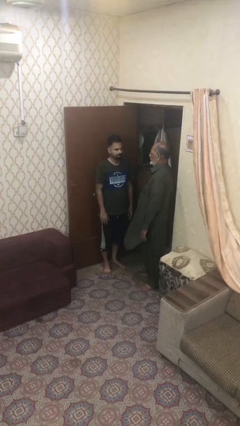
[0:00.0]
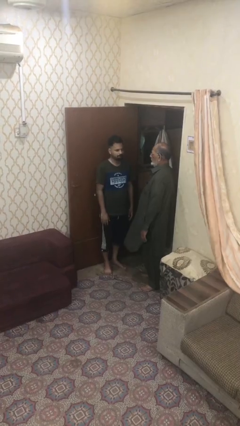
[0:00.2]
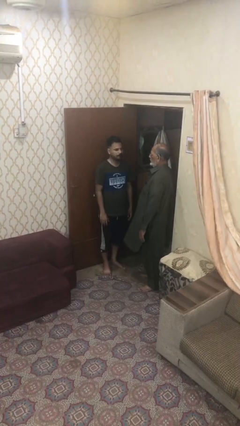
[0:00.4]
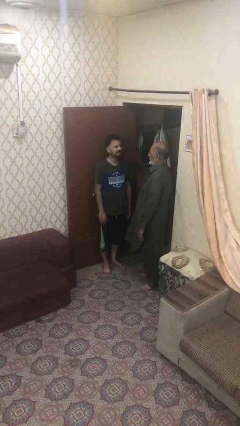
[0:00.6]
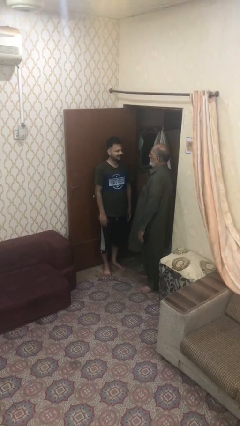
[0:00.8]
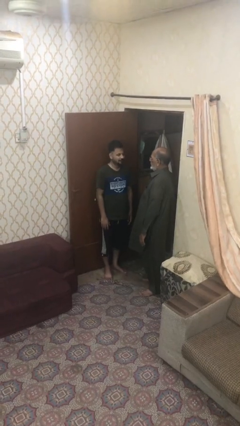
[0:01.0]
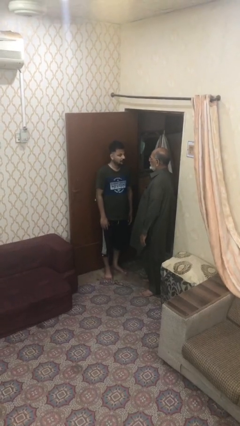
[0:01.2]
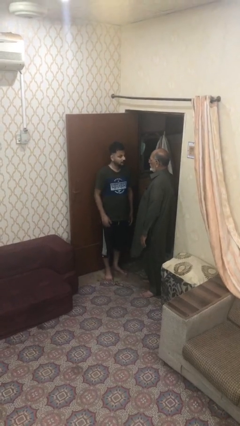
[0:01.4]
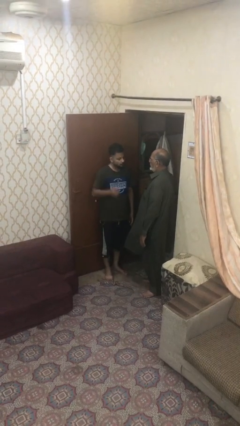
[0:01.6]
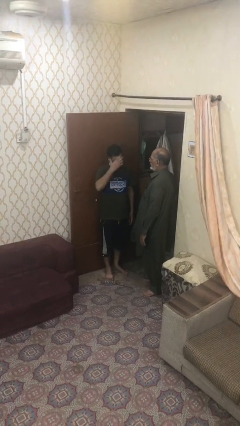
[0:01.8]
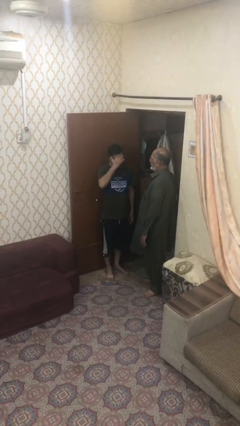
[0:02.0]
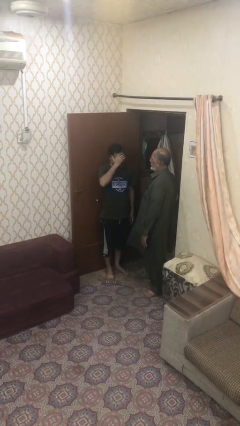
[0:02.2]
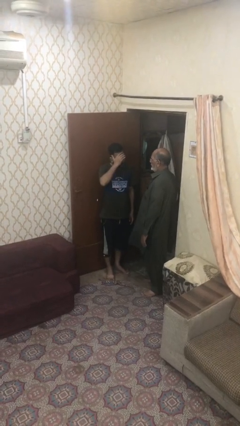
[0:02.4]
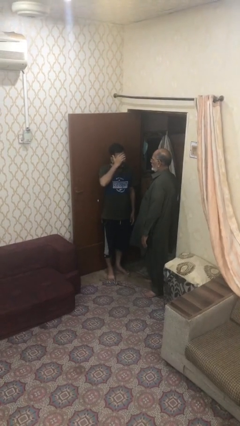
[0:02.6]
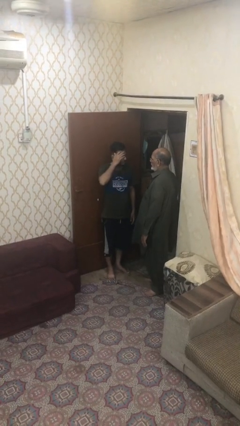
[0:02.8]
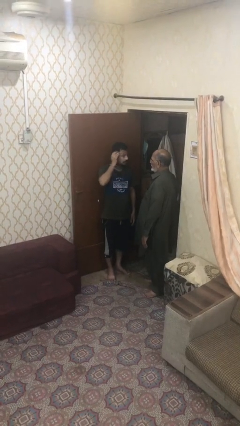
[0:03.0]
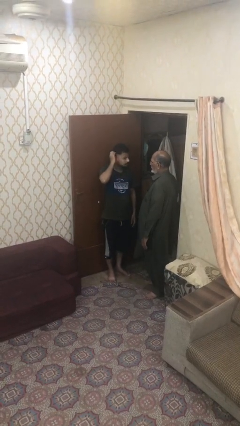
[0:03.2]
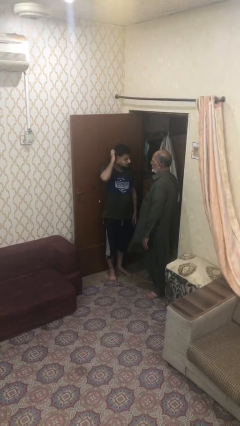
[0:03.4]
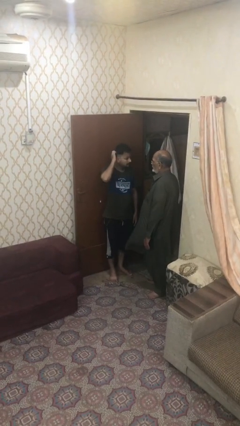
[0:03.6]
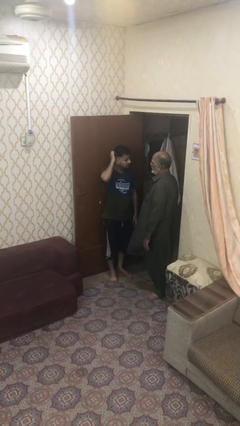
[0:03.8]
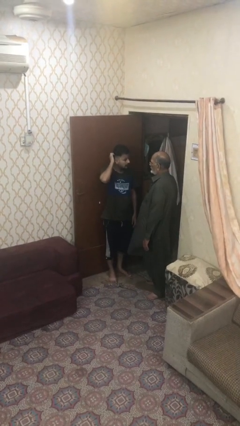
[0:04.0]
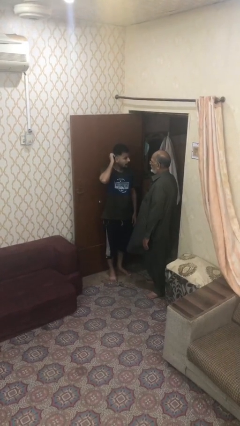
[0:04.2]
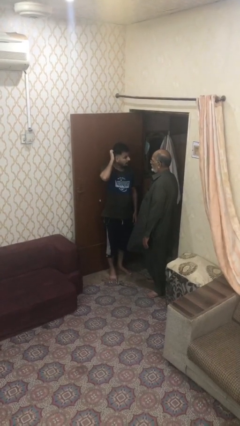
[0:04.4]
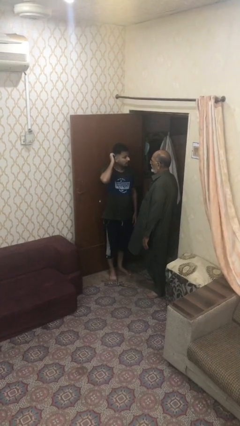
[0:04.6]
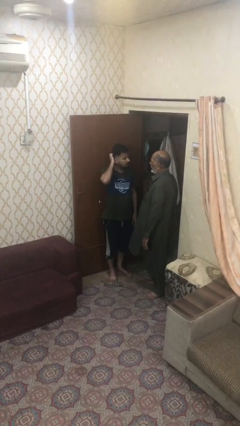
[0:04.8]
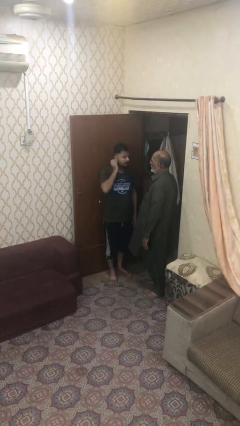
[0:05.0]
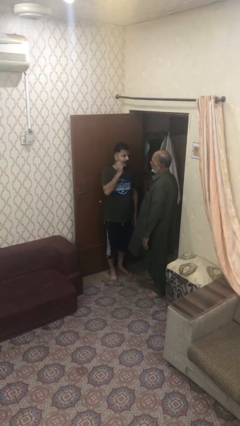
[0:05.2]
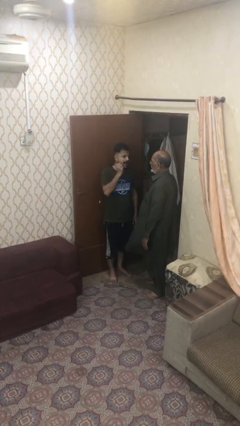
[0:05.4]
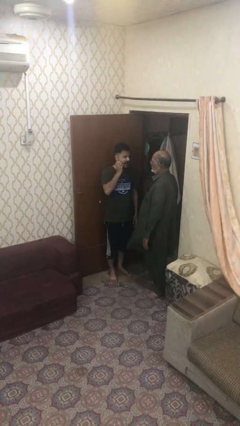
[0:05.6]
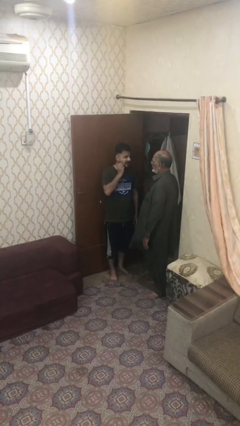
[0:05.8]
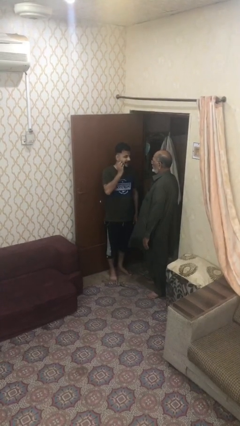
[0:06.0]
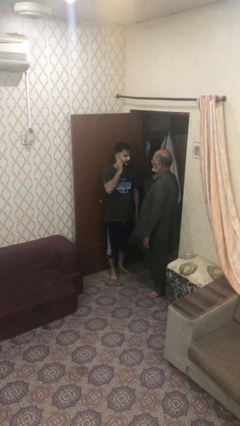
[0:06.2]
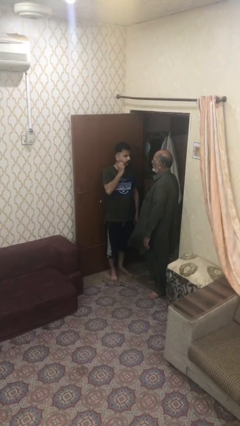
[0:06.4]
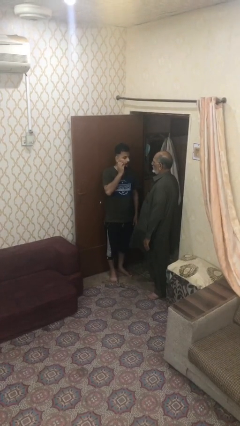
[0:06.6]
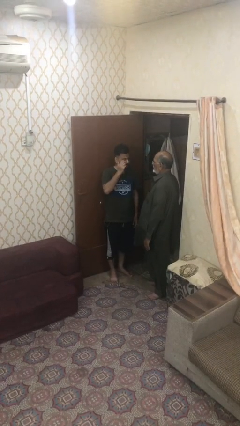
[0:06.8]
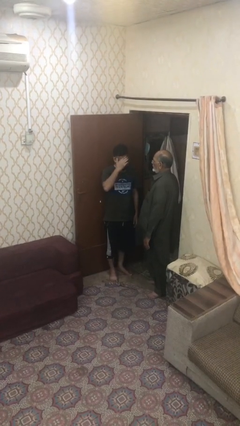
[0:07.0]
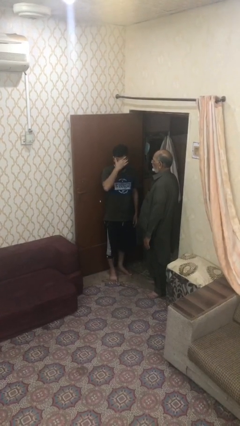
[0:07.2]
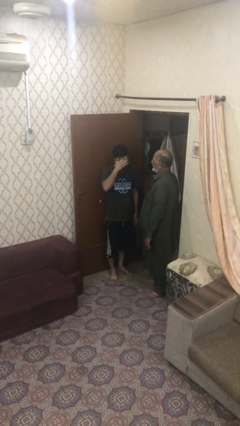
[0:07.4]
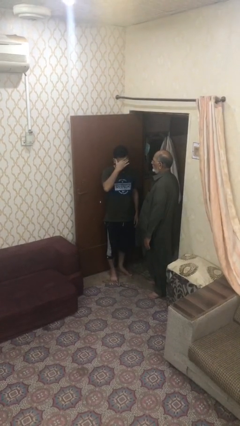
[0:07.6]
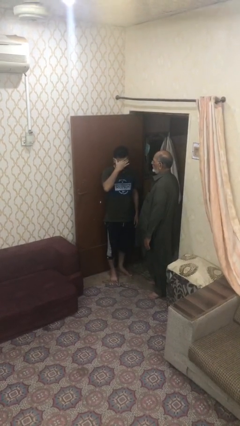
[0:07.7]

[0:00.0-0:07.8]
person talks to person

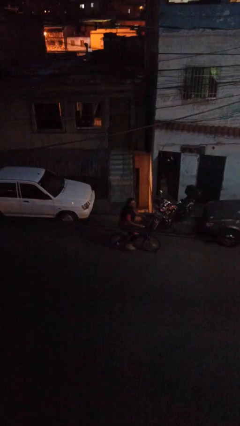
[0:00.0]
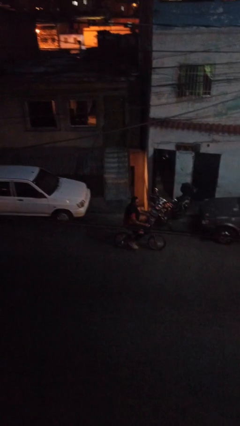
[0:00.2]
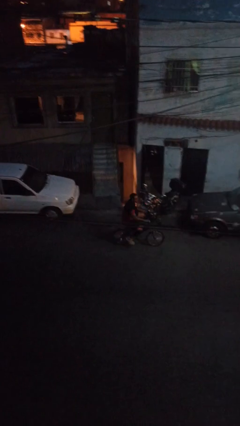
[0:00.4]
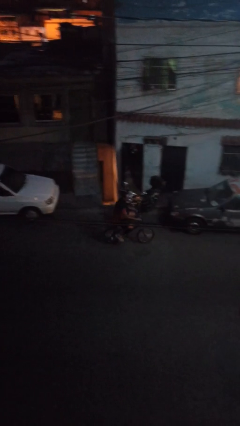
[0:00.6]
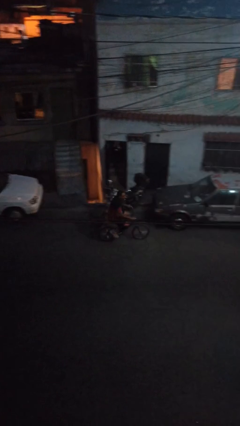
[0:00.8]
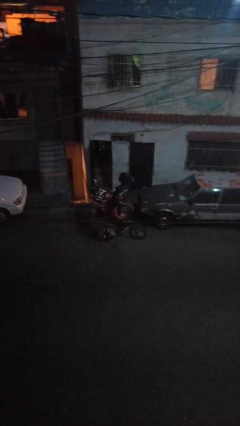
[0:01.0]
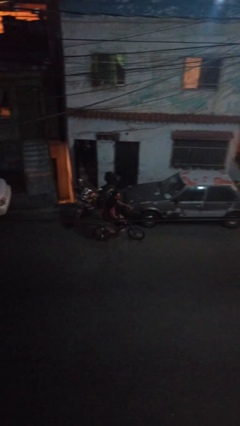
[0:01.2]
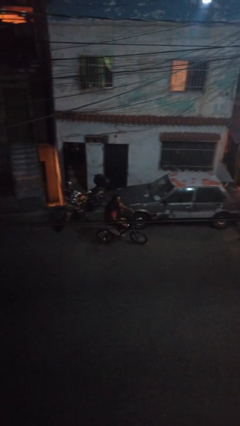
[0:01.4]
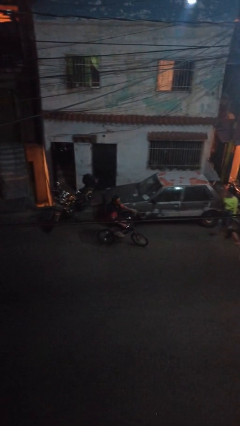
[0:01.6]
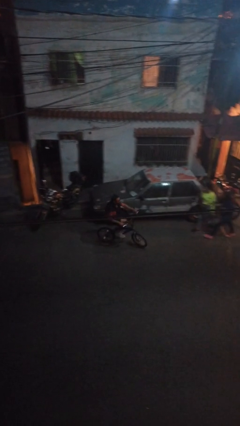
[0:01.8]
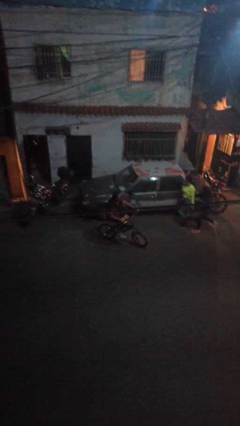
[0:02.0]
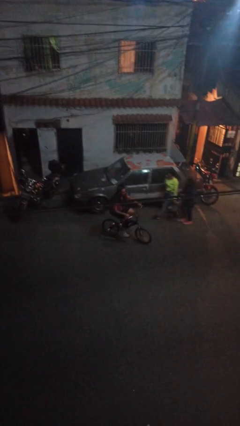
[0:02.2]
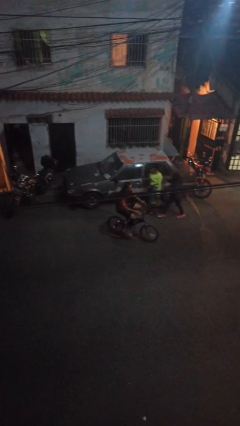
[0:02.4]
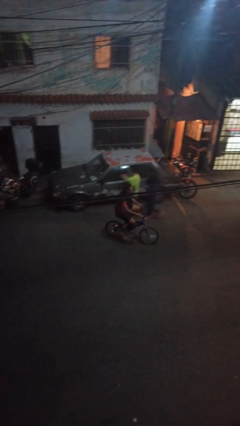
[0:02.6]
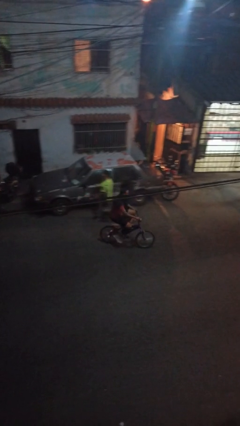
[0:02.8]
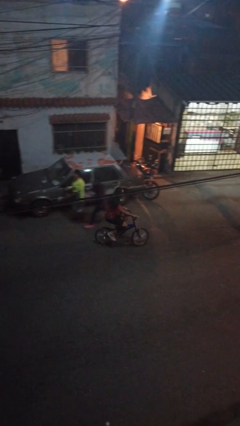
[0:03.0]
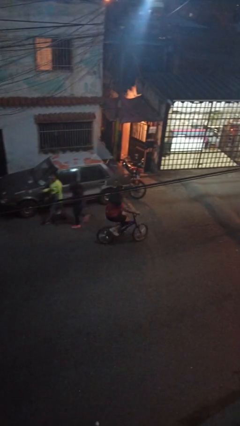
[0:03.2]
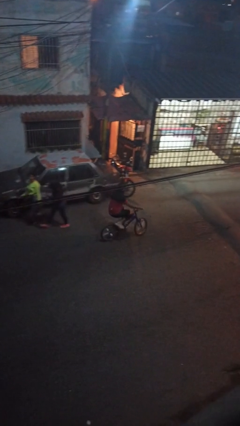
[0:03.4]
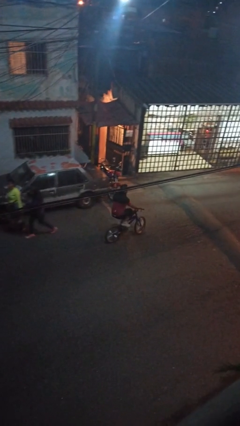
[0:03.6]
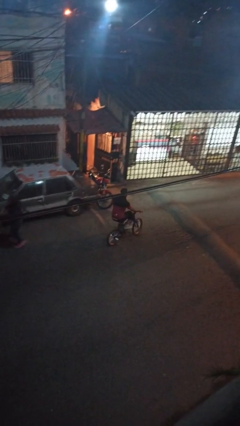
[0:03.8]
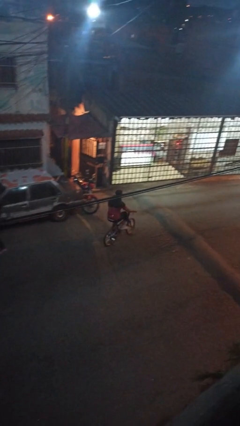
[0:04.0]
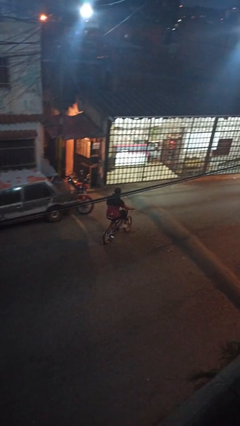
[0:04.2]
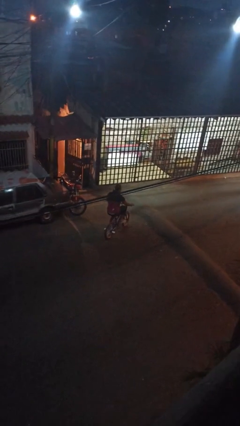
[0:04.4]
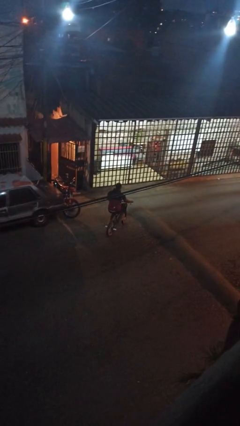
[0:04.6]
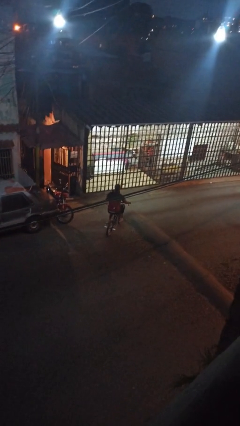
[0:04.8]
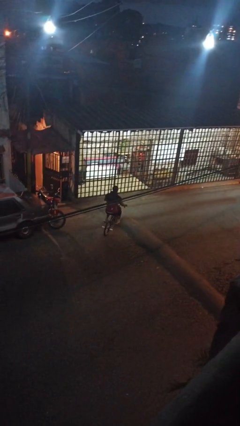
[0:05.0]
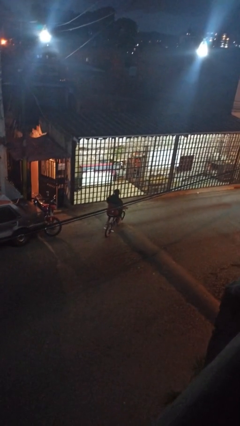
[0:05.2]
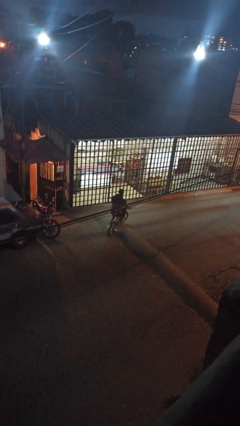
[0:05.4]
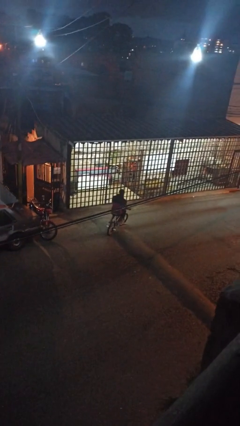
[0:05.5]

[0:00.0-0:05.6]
person rides bicycle

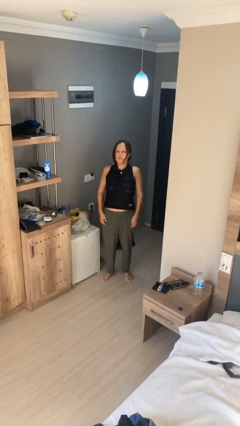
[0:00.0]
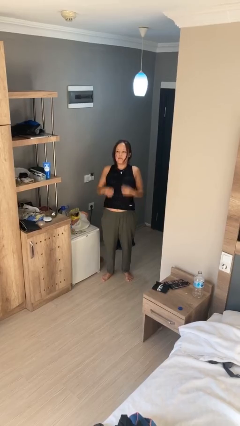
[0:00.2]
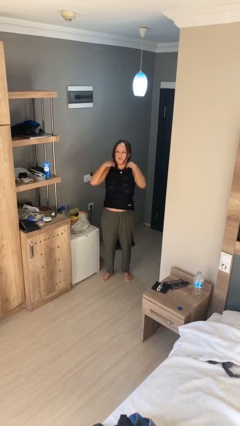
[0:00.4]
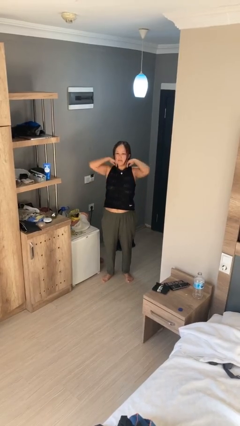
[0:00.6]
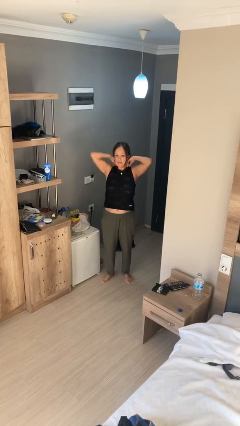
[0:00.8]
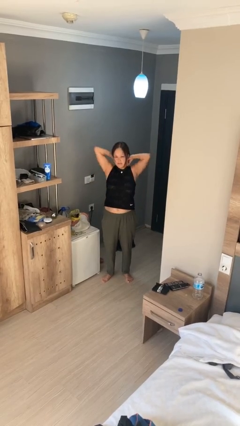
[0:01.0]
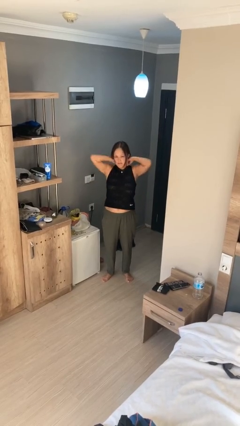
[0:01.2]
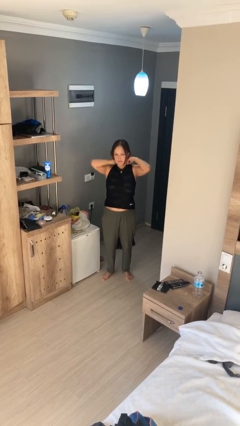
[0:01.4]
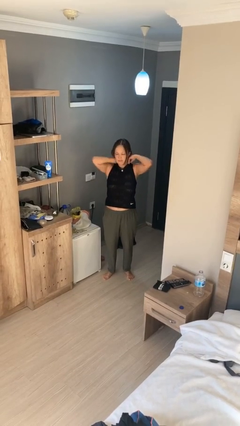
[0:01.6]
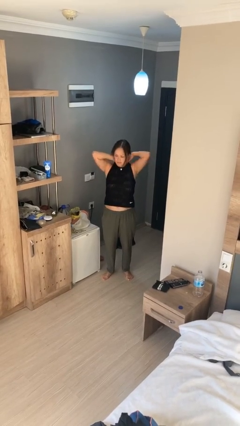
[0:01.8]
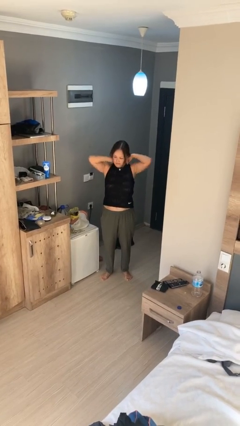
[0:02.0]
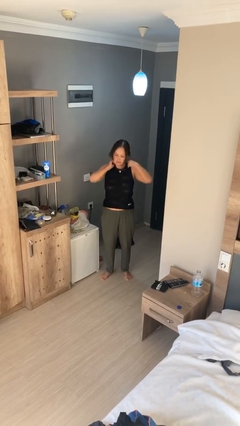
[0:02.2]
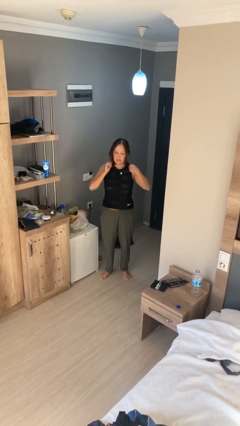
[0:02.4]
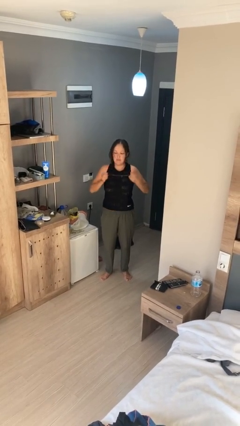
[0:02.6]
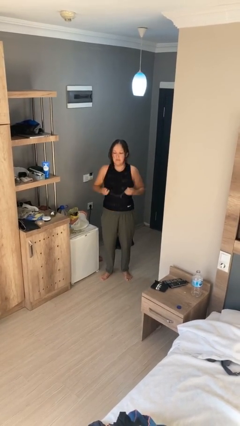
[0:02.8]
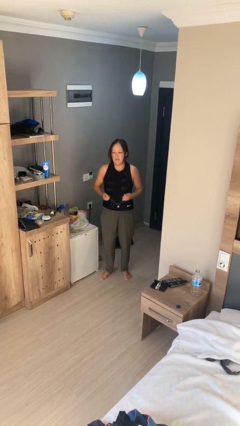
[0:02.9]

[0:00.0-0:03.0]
person takes off necklace

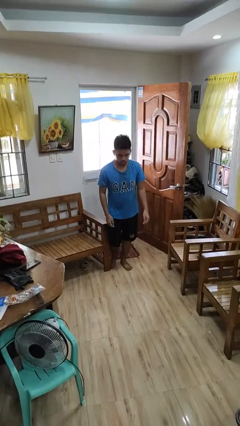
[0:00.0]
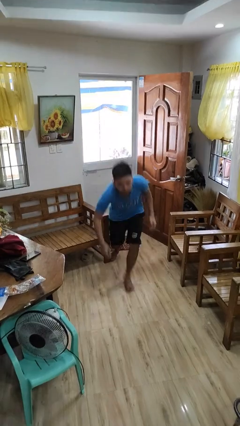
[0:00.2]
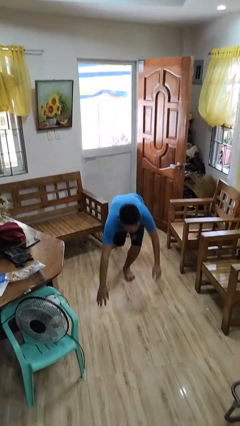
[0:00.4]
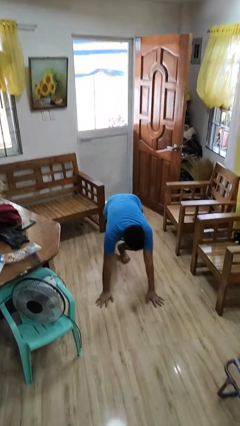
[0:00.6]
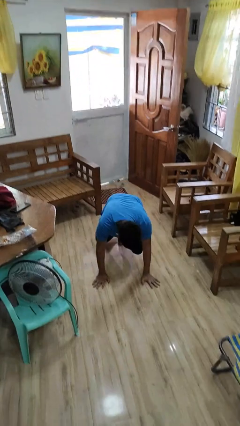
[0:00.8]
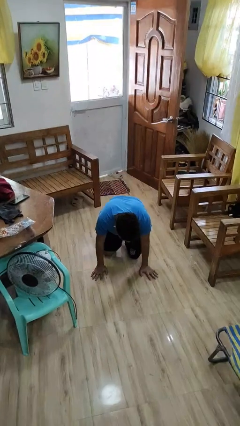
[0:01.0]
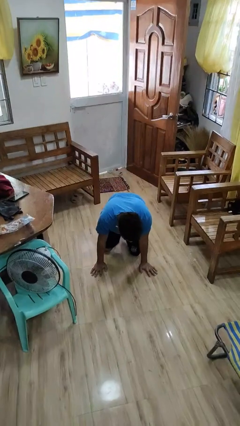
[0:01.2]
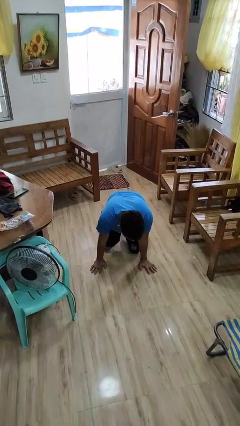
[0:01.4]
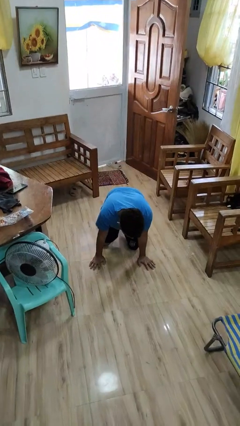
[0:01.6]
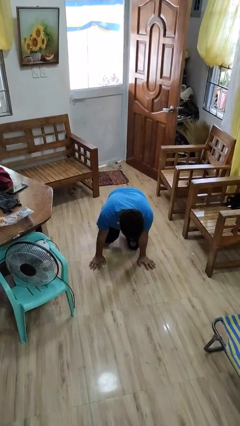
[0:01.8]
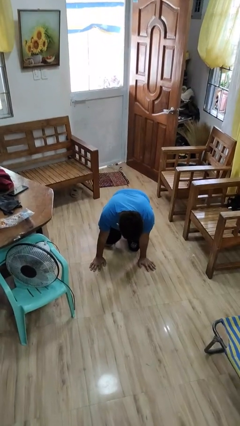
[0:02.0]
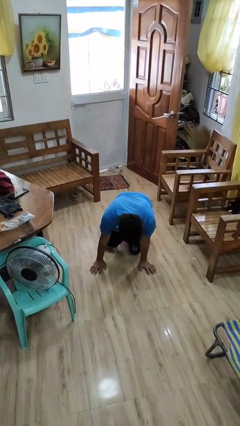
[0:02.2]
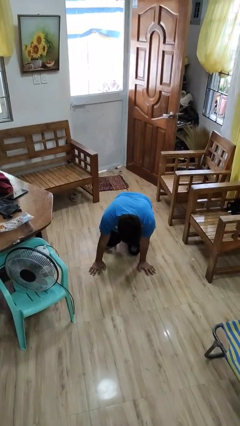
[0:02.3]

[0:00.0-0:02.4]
person trips on object on floor
